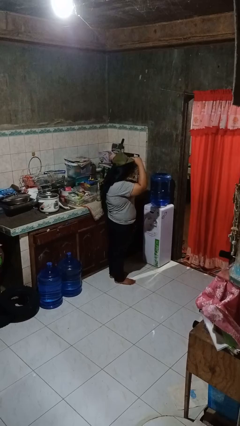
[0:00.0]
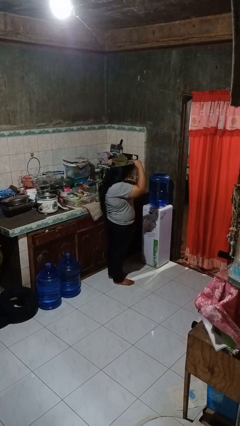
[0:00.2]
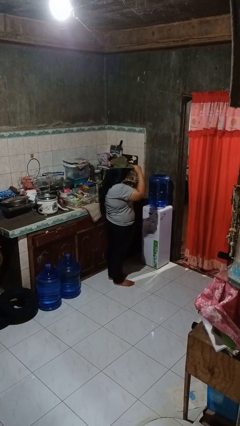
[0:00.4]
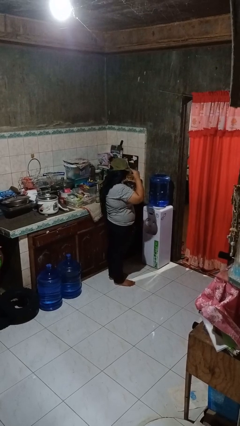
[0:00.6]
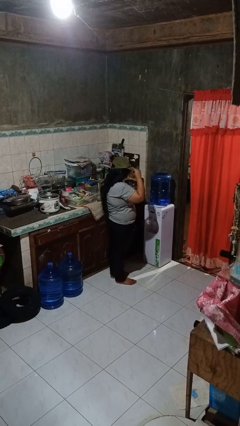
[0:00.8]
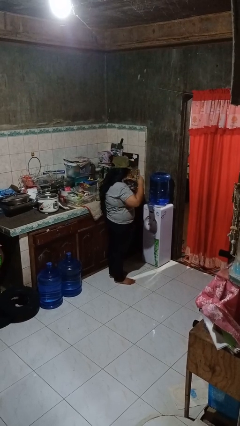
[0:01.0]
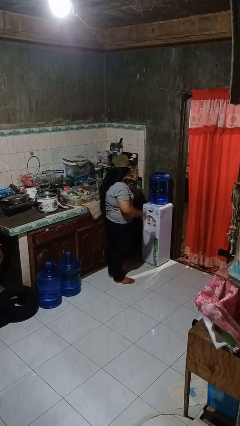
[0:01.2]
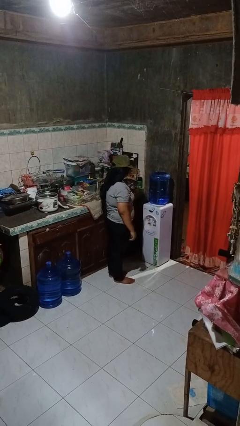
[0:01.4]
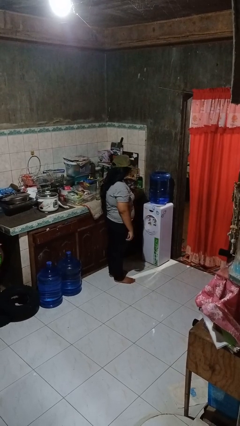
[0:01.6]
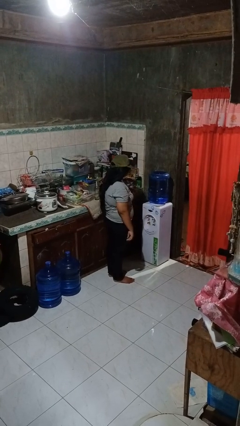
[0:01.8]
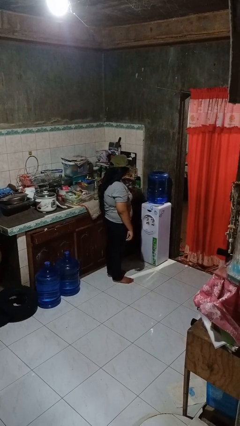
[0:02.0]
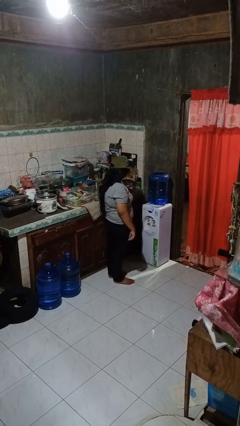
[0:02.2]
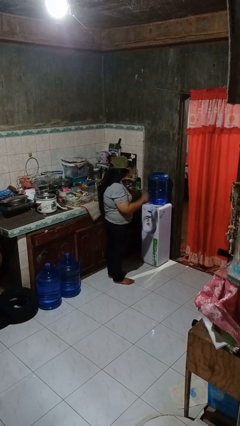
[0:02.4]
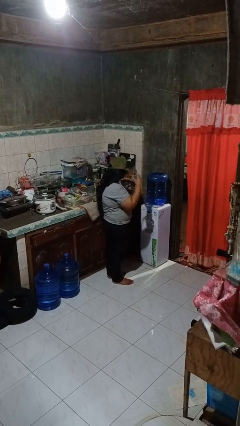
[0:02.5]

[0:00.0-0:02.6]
person puts on hat

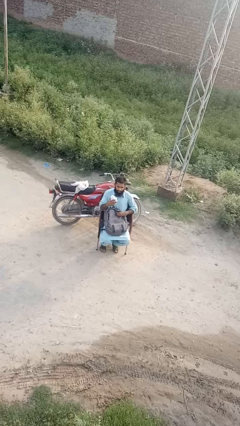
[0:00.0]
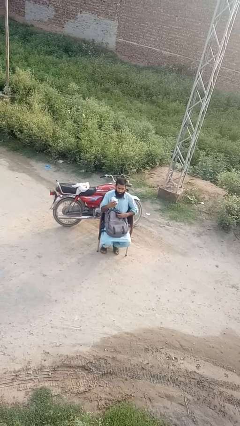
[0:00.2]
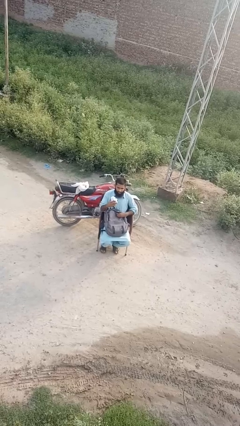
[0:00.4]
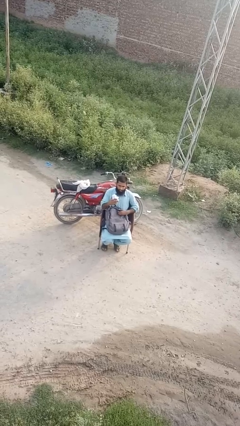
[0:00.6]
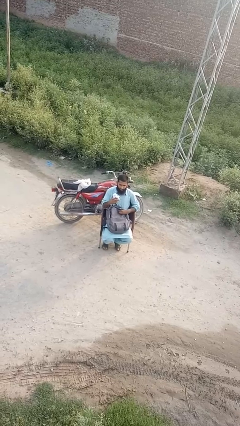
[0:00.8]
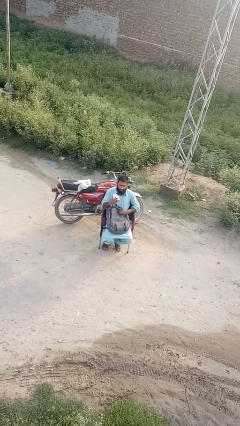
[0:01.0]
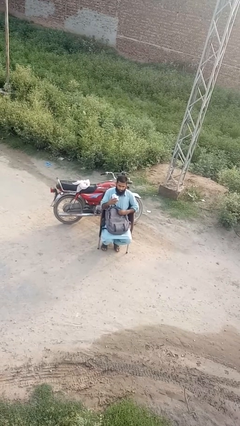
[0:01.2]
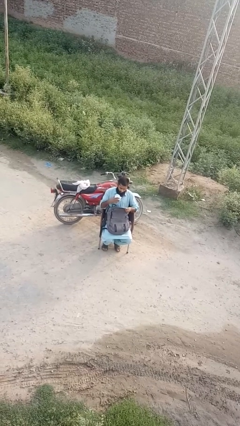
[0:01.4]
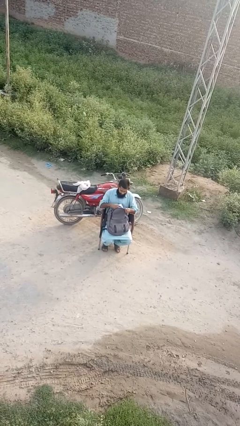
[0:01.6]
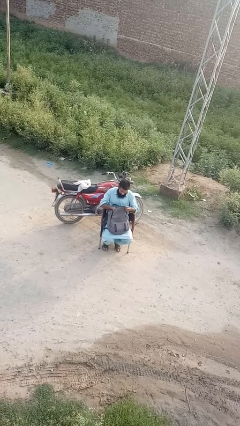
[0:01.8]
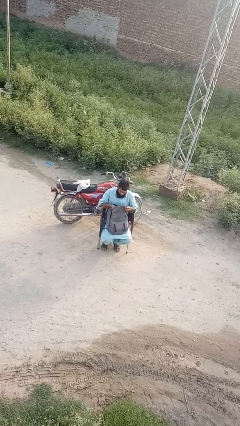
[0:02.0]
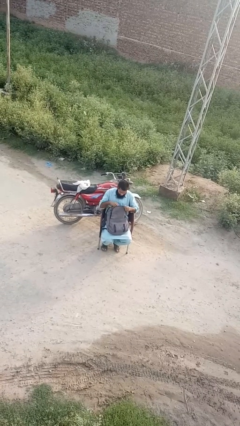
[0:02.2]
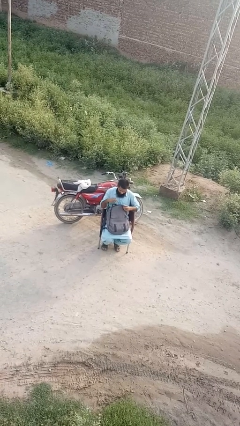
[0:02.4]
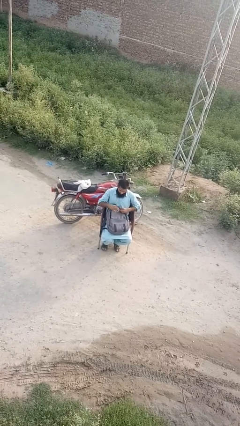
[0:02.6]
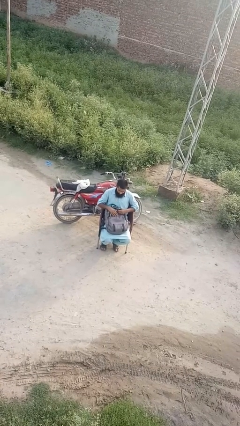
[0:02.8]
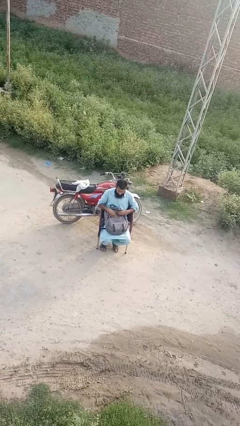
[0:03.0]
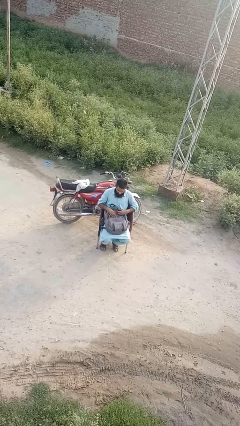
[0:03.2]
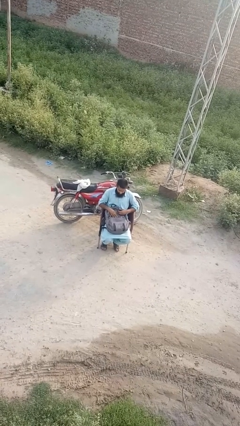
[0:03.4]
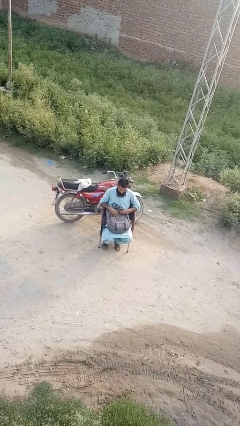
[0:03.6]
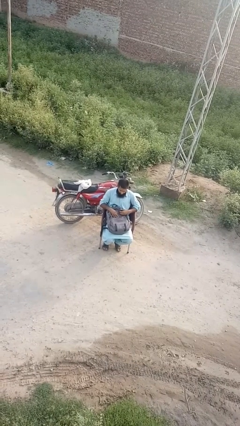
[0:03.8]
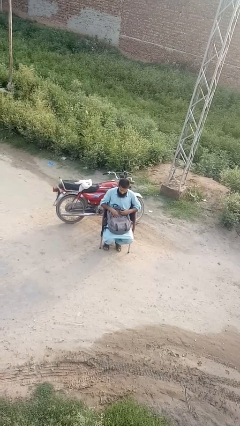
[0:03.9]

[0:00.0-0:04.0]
person puts object into backpack

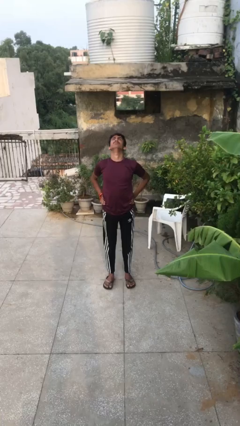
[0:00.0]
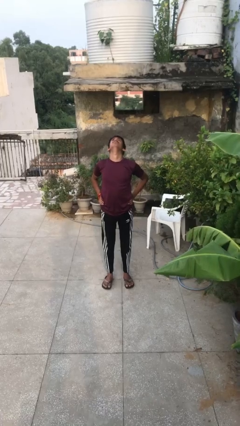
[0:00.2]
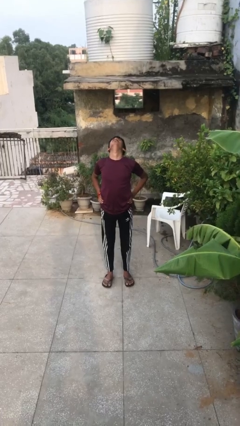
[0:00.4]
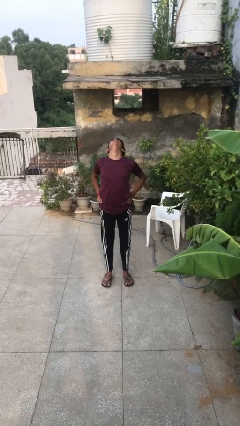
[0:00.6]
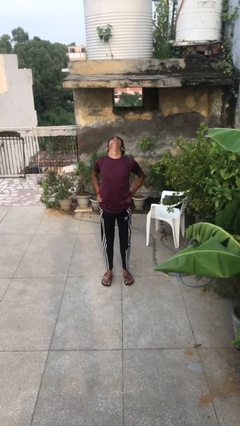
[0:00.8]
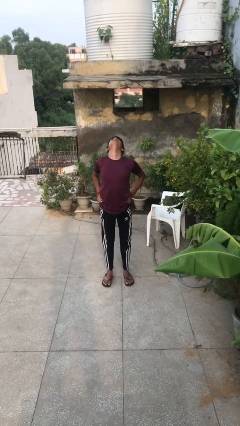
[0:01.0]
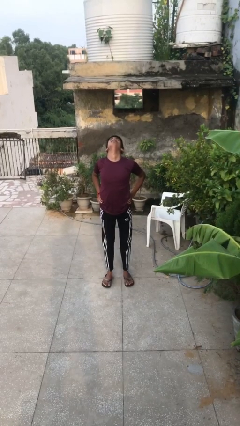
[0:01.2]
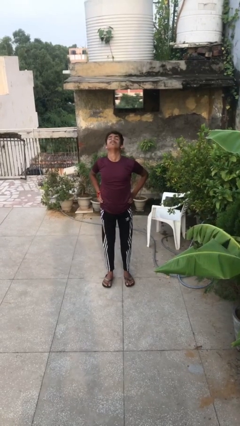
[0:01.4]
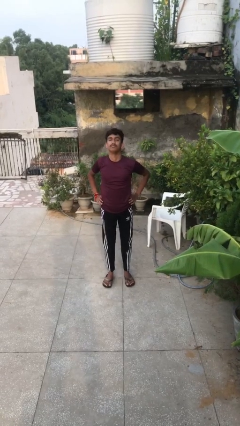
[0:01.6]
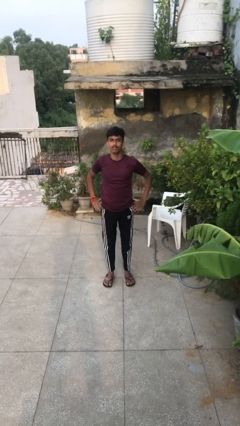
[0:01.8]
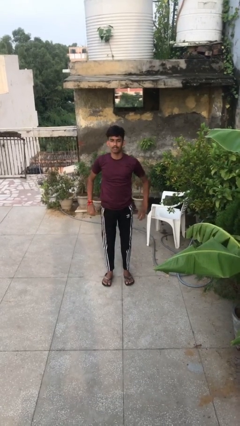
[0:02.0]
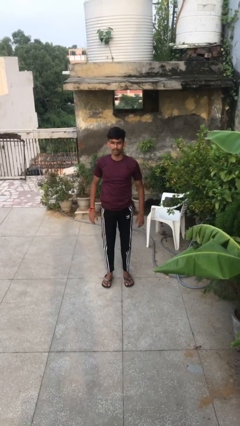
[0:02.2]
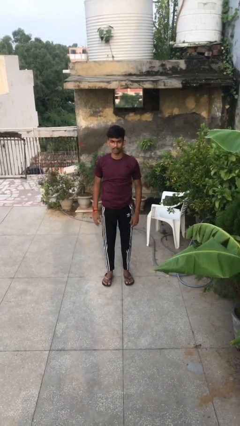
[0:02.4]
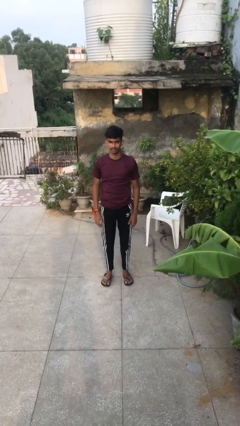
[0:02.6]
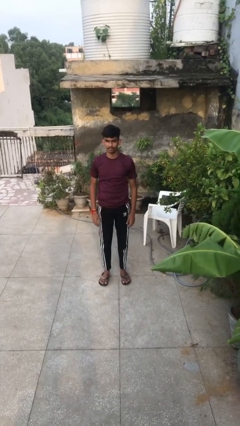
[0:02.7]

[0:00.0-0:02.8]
person stretches back

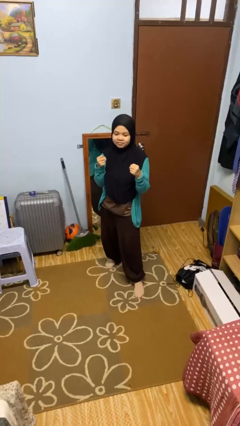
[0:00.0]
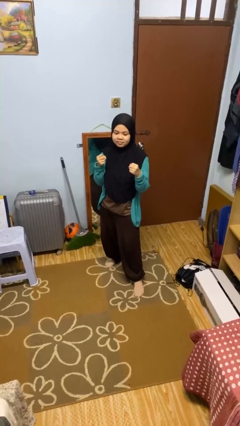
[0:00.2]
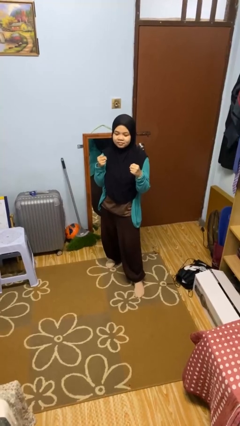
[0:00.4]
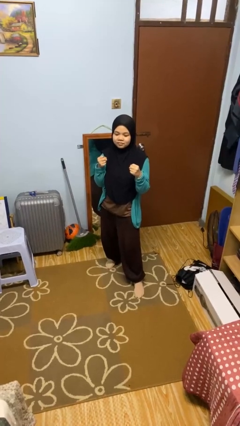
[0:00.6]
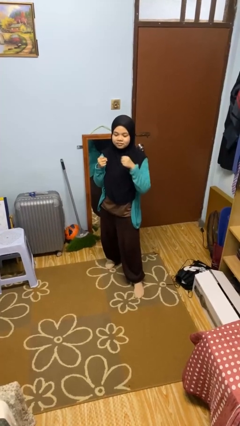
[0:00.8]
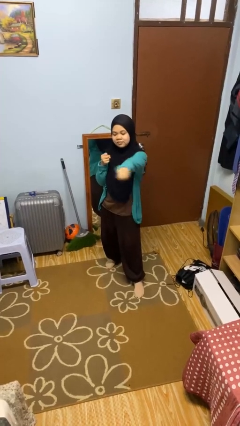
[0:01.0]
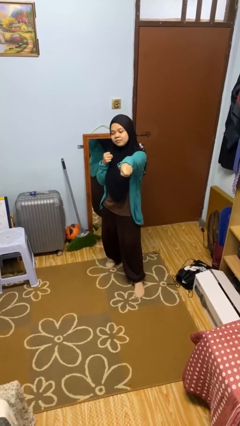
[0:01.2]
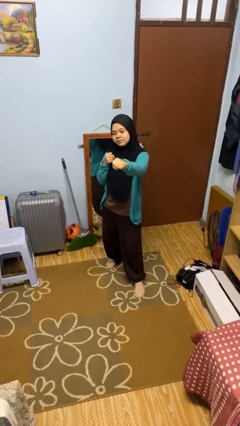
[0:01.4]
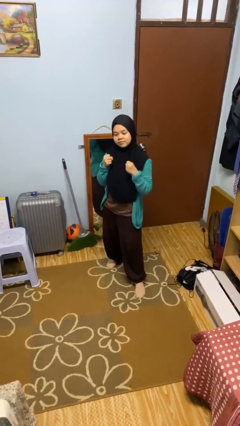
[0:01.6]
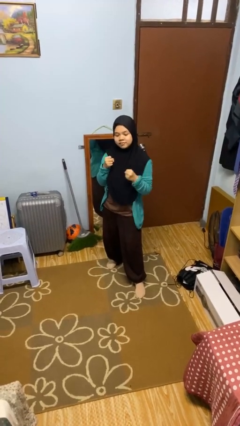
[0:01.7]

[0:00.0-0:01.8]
person punches

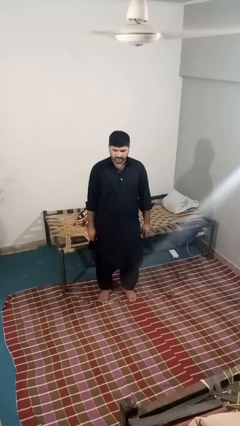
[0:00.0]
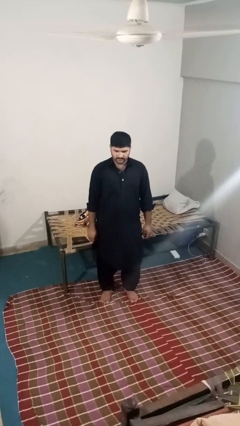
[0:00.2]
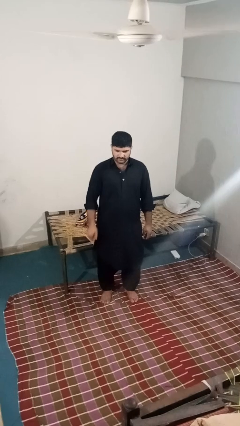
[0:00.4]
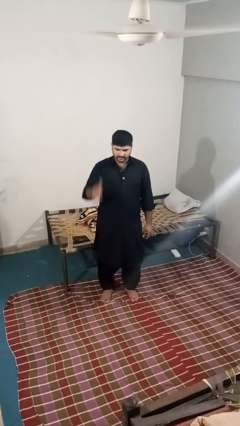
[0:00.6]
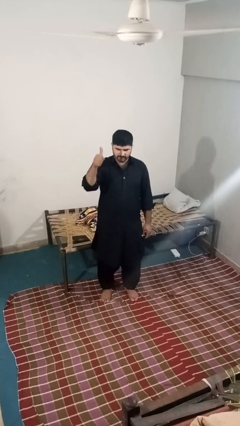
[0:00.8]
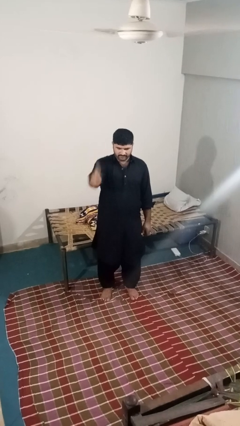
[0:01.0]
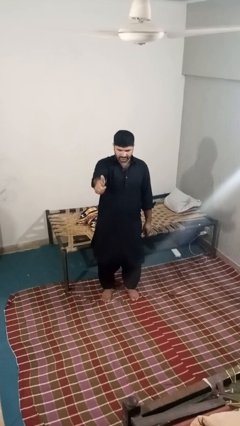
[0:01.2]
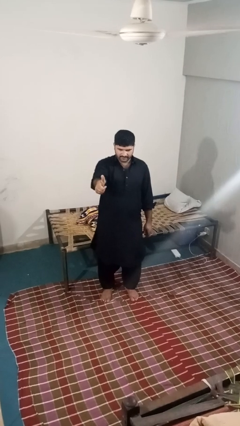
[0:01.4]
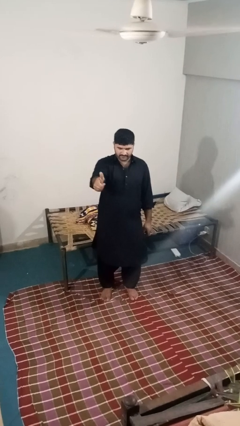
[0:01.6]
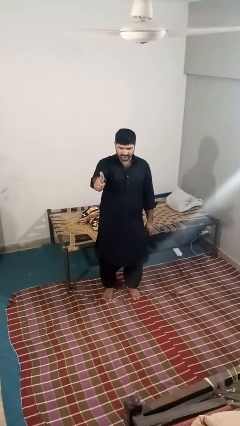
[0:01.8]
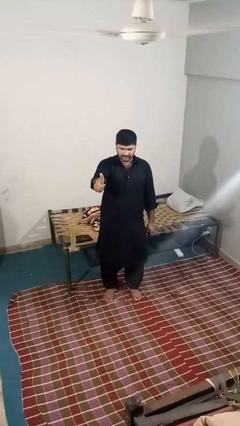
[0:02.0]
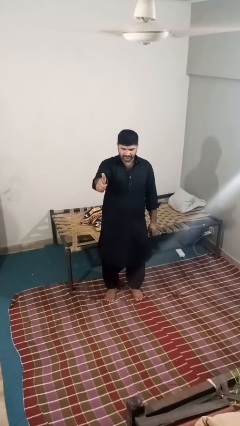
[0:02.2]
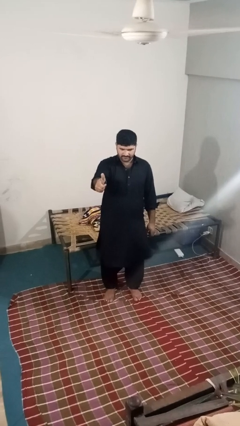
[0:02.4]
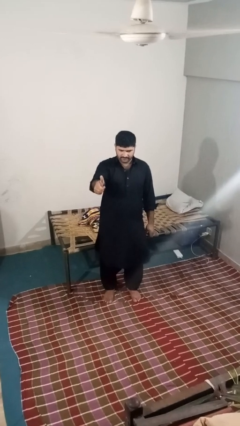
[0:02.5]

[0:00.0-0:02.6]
person gestures thumbs up

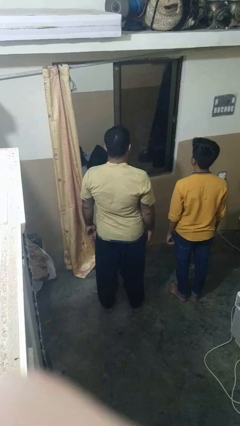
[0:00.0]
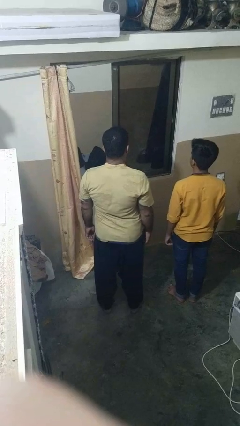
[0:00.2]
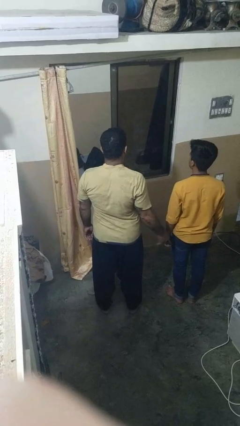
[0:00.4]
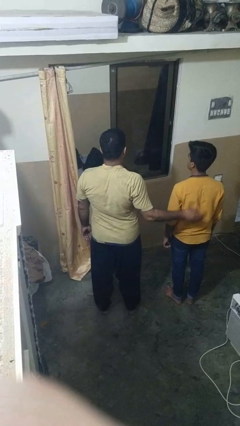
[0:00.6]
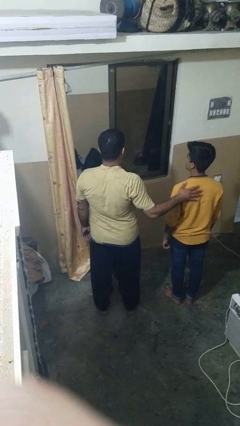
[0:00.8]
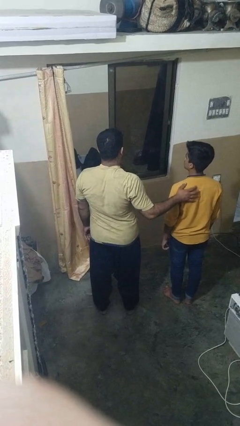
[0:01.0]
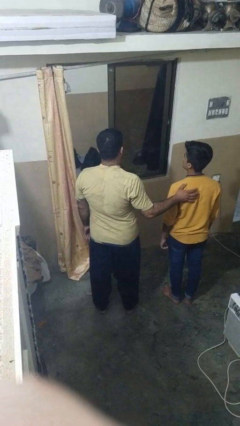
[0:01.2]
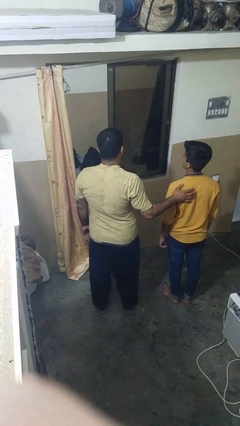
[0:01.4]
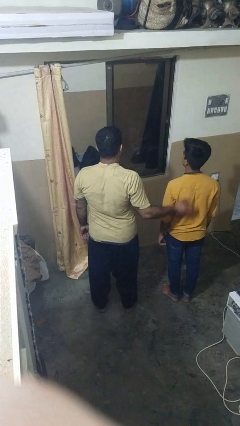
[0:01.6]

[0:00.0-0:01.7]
person touches back of person

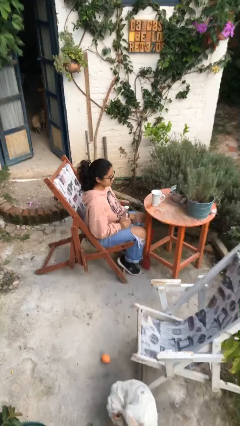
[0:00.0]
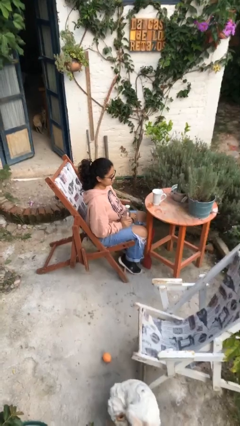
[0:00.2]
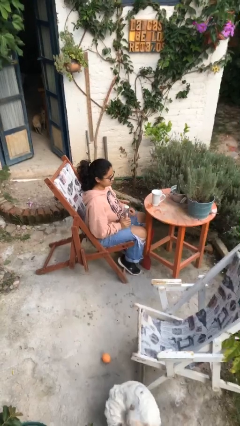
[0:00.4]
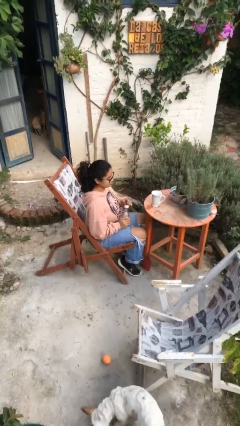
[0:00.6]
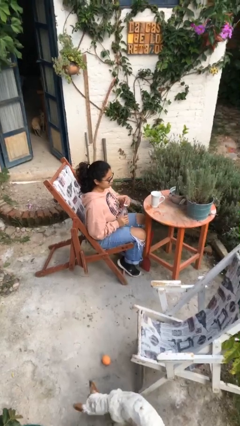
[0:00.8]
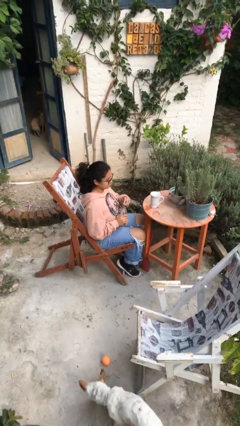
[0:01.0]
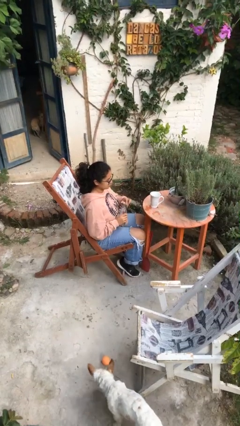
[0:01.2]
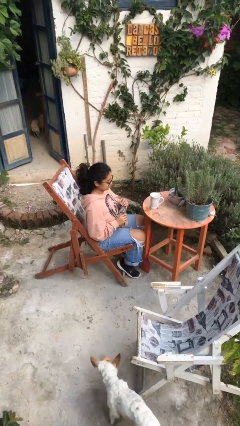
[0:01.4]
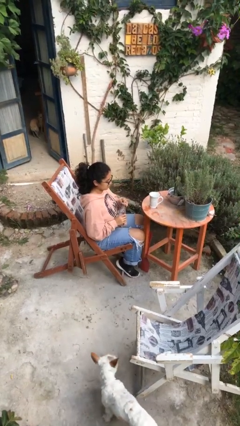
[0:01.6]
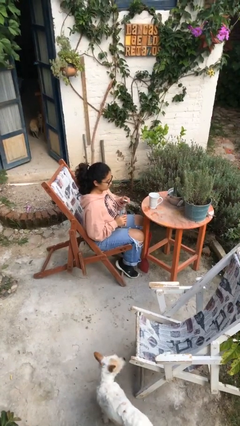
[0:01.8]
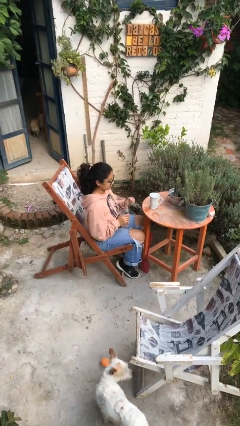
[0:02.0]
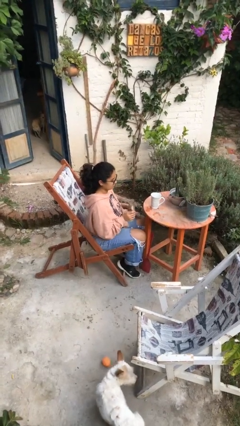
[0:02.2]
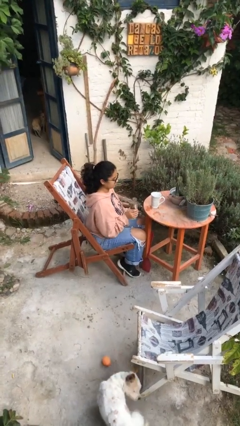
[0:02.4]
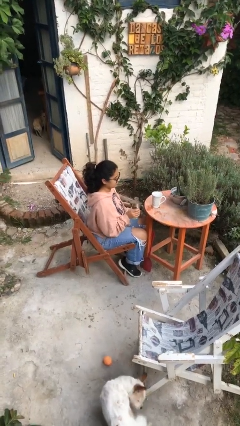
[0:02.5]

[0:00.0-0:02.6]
person unscrews lid from bottle
